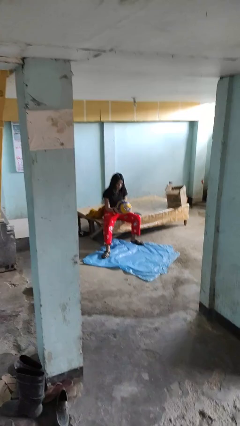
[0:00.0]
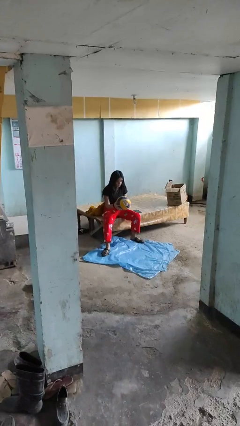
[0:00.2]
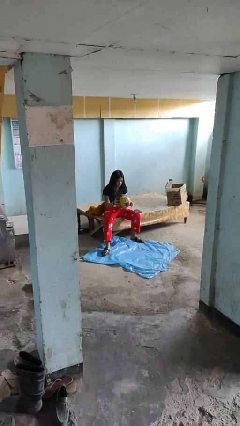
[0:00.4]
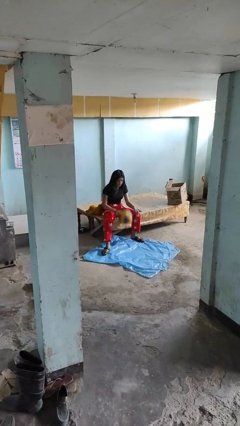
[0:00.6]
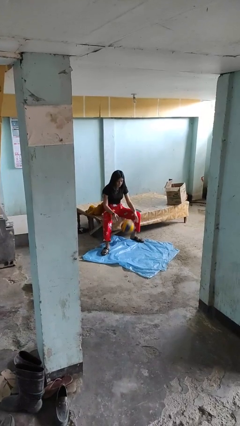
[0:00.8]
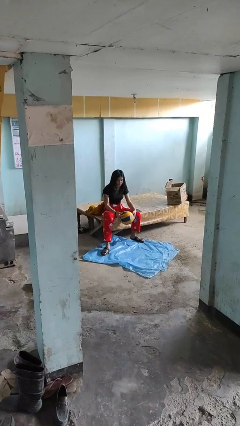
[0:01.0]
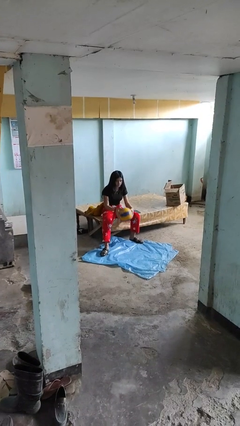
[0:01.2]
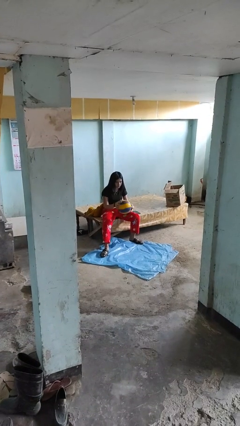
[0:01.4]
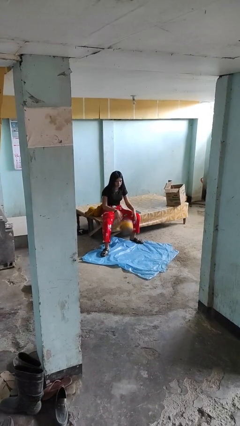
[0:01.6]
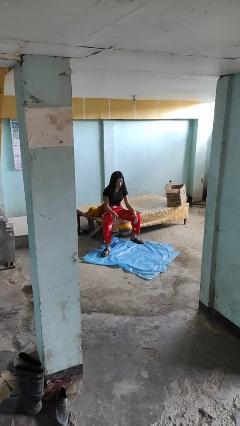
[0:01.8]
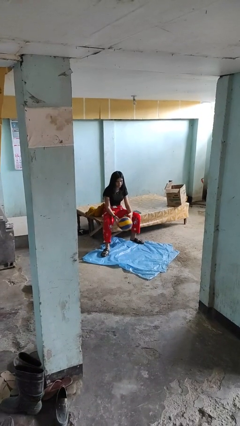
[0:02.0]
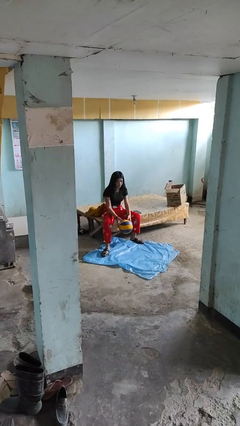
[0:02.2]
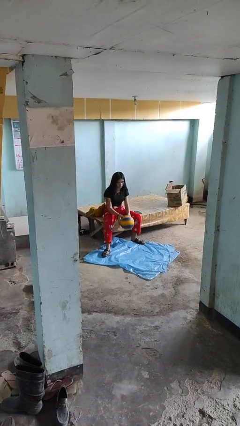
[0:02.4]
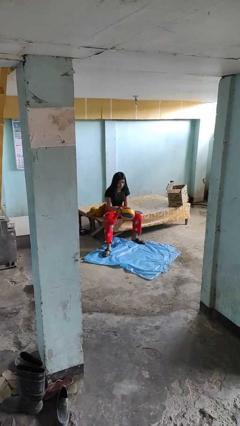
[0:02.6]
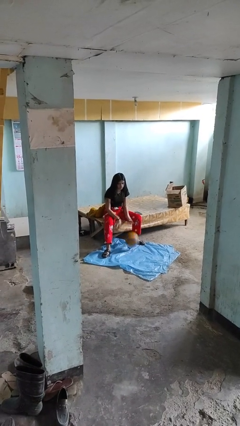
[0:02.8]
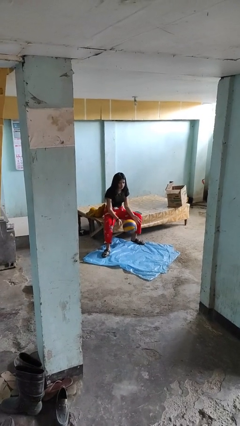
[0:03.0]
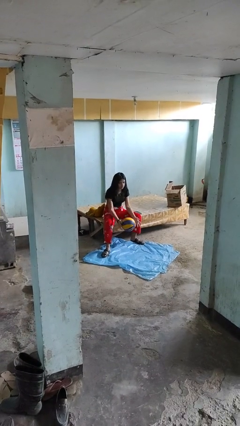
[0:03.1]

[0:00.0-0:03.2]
person bounces ball on floor

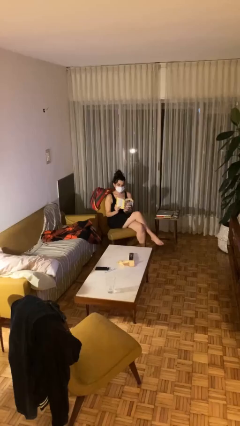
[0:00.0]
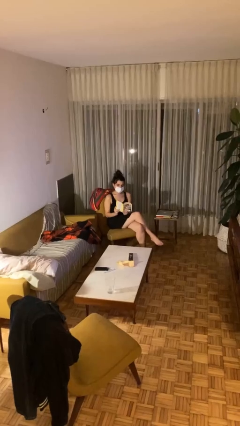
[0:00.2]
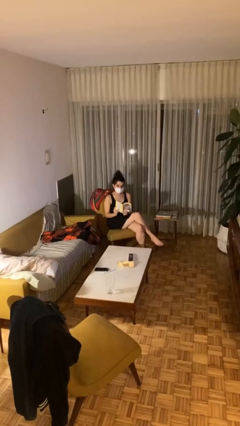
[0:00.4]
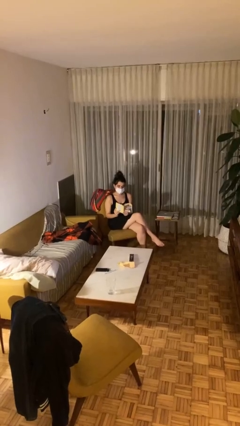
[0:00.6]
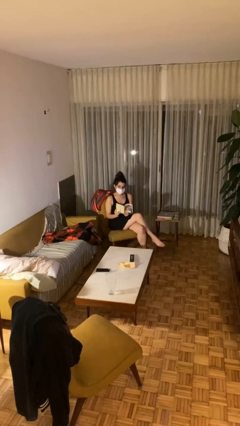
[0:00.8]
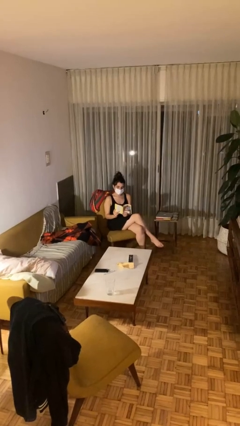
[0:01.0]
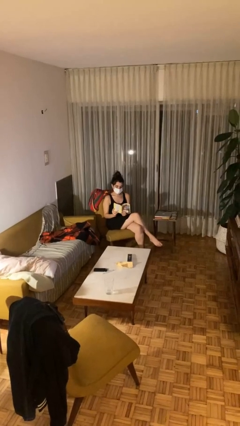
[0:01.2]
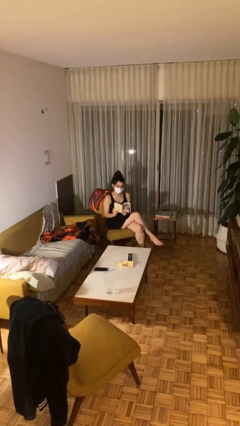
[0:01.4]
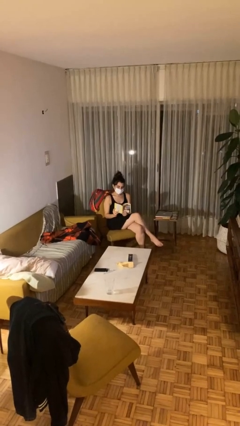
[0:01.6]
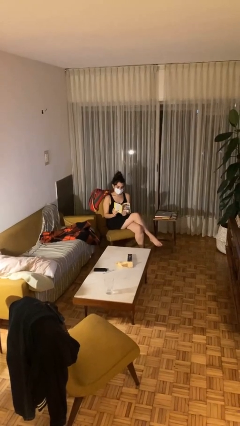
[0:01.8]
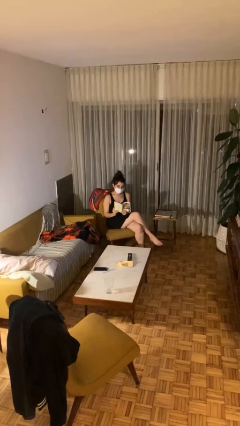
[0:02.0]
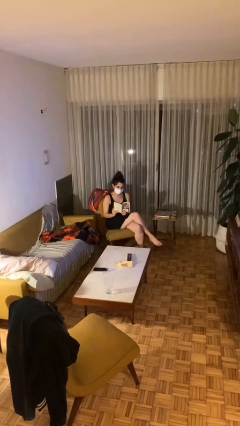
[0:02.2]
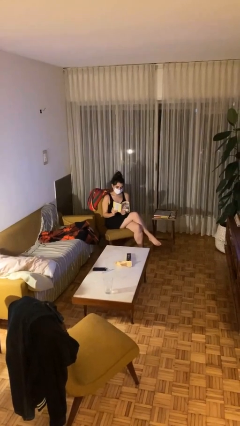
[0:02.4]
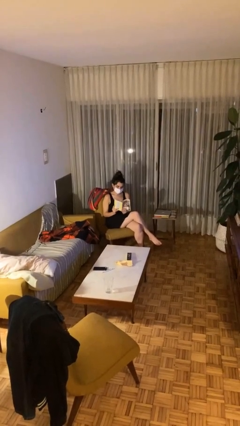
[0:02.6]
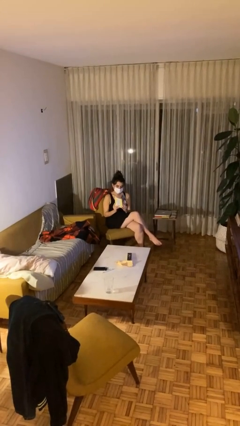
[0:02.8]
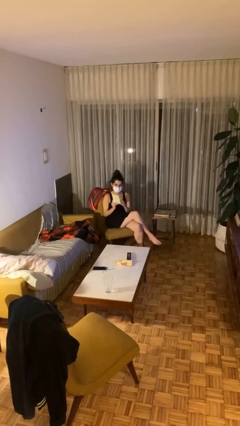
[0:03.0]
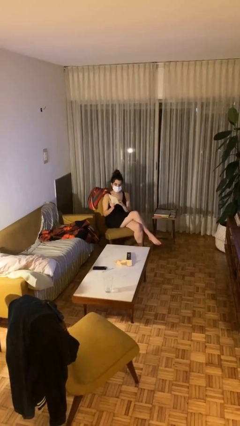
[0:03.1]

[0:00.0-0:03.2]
person reads document

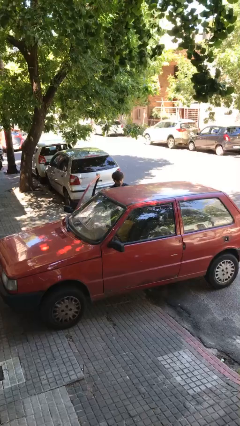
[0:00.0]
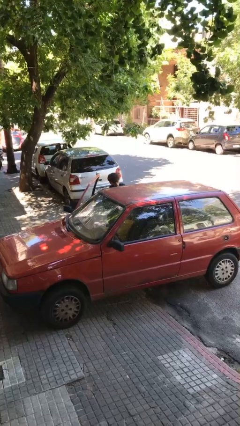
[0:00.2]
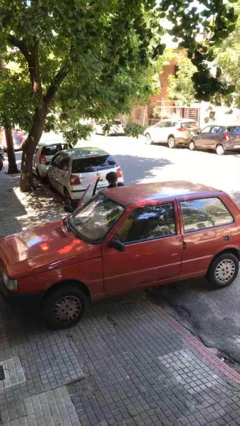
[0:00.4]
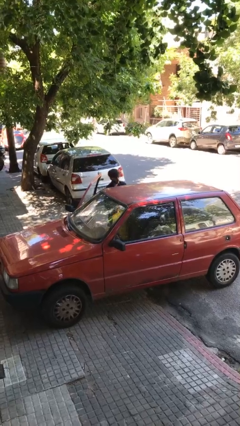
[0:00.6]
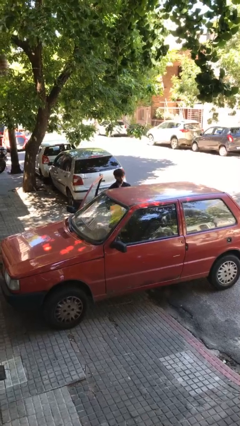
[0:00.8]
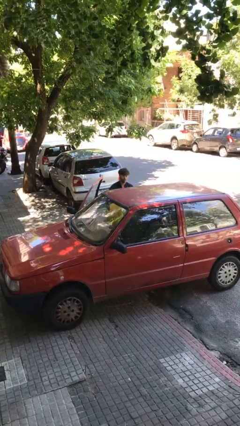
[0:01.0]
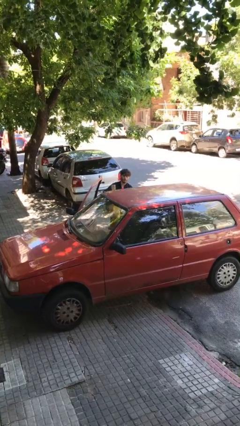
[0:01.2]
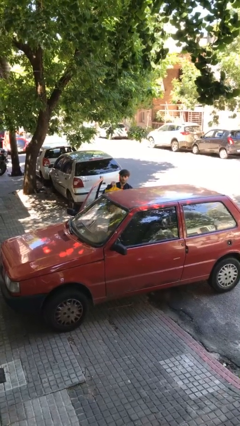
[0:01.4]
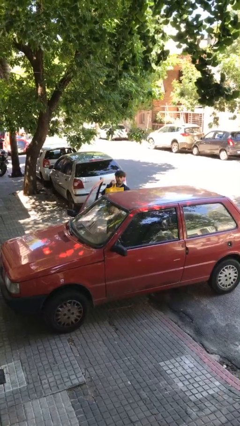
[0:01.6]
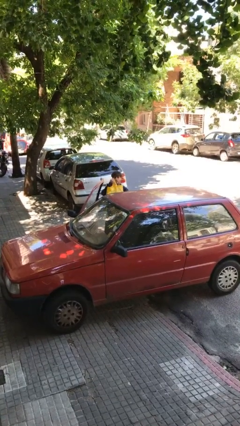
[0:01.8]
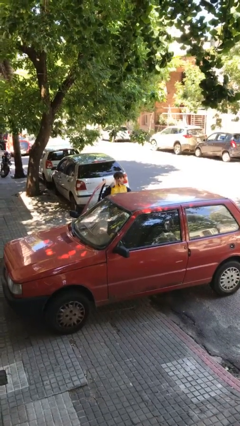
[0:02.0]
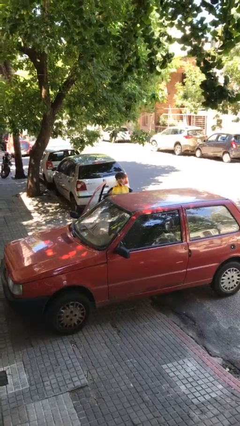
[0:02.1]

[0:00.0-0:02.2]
person unloads car

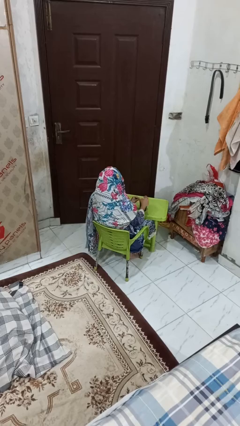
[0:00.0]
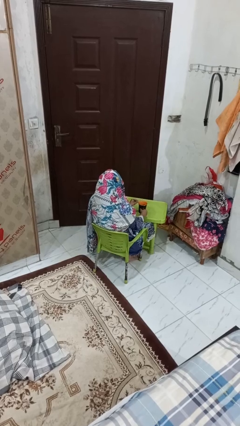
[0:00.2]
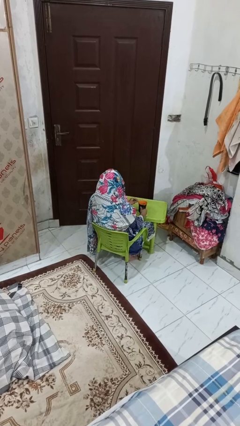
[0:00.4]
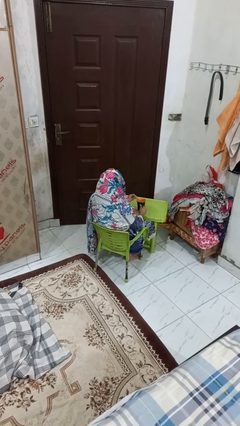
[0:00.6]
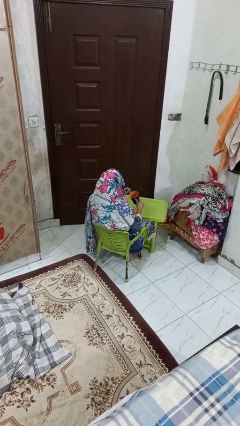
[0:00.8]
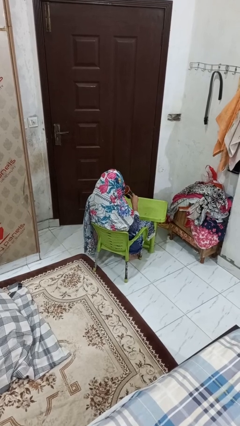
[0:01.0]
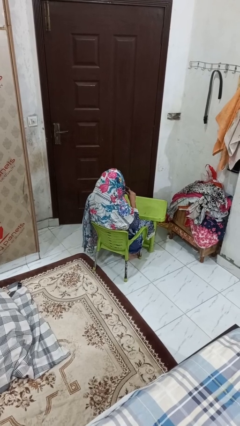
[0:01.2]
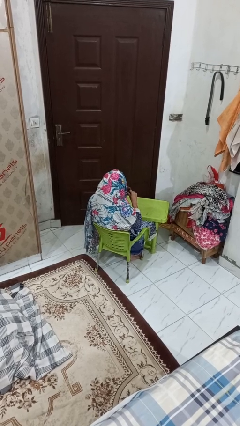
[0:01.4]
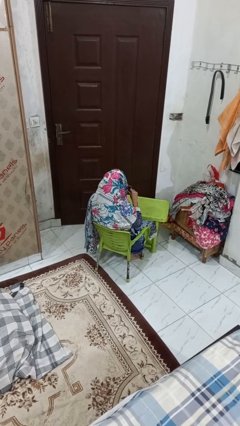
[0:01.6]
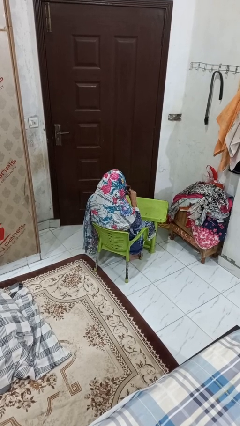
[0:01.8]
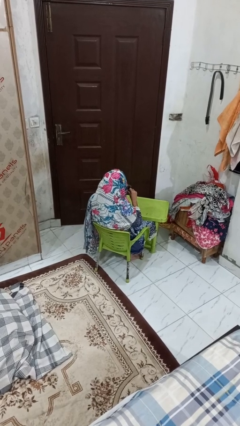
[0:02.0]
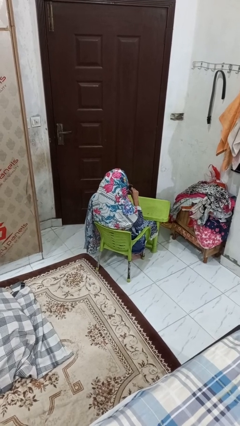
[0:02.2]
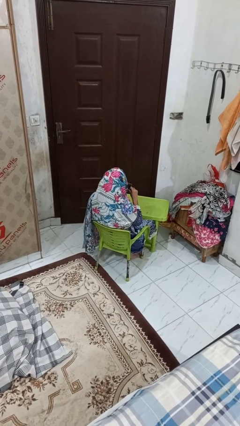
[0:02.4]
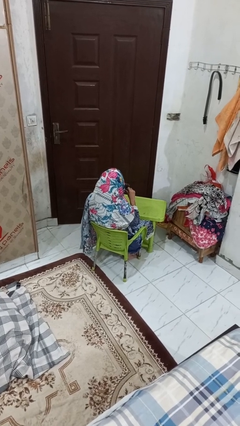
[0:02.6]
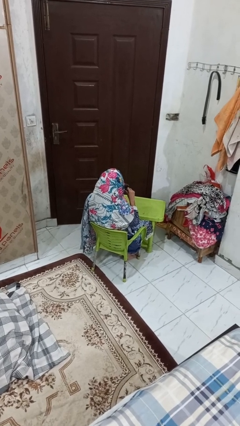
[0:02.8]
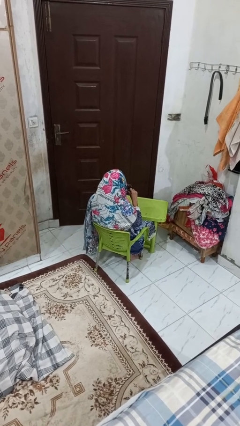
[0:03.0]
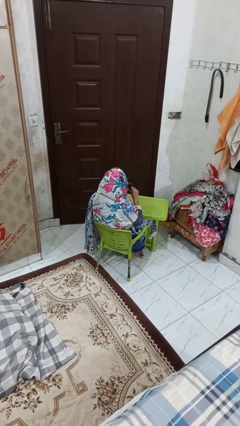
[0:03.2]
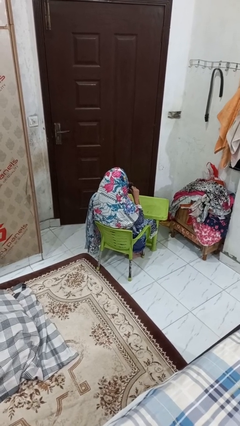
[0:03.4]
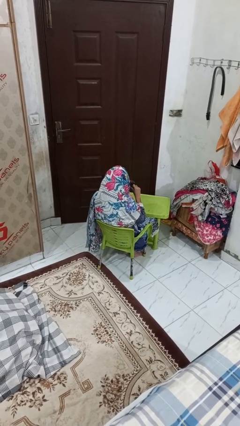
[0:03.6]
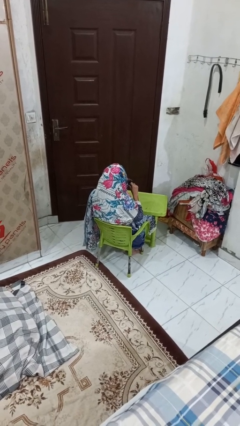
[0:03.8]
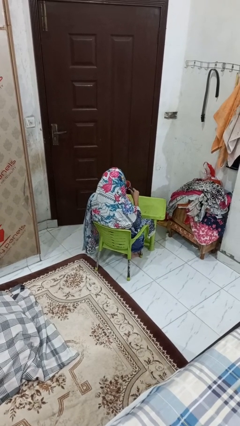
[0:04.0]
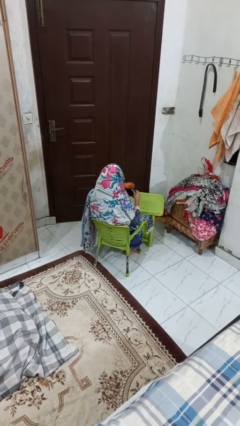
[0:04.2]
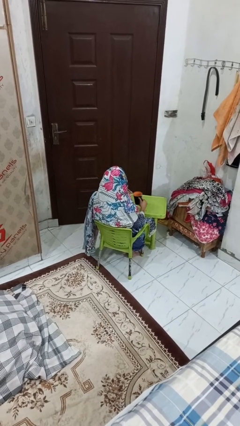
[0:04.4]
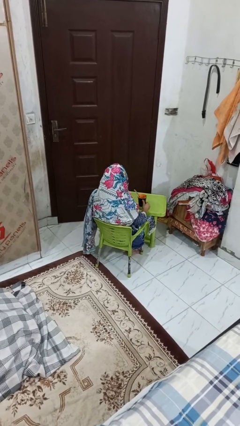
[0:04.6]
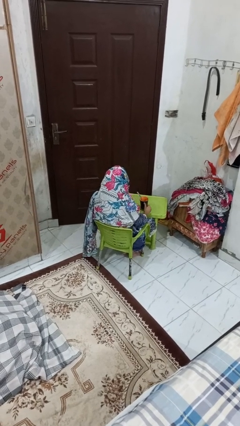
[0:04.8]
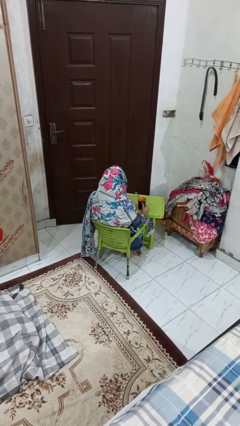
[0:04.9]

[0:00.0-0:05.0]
person drinks from mug

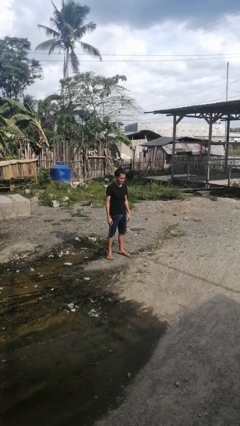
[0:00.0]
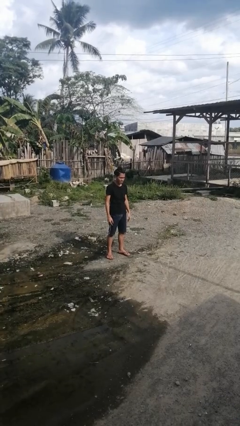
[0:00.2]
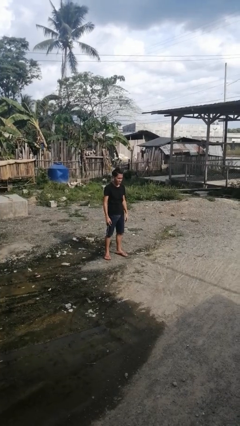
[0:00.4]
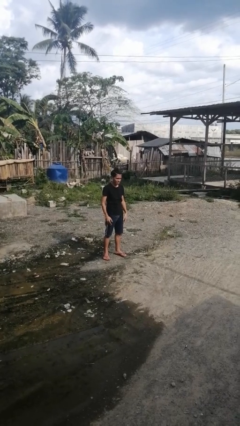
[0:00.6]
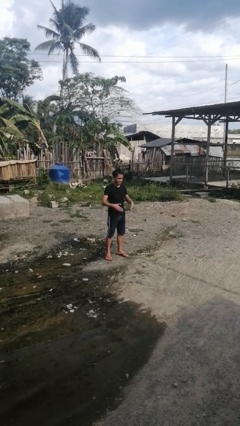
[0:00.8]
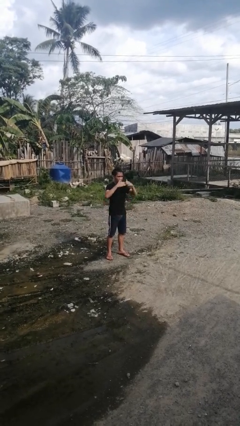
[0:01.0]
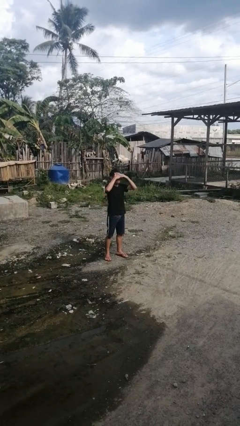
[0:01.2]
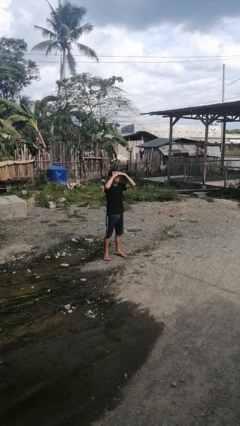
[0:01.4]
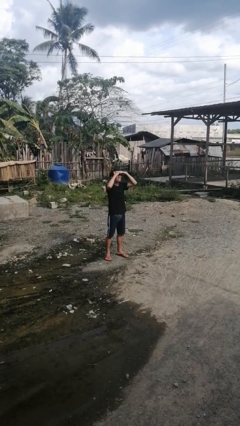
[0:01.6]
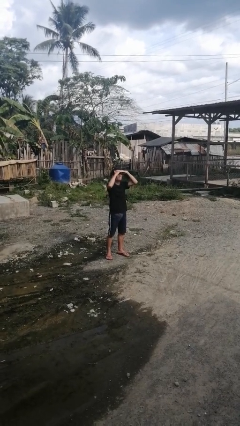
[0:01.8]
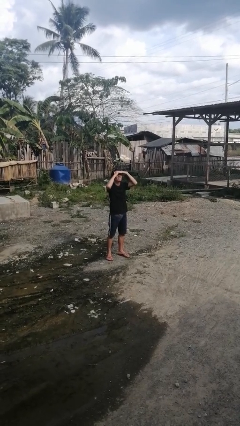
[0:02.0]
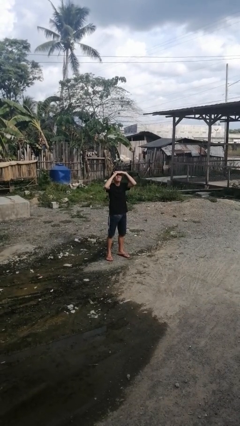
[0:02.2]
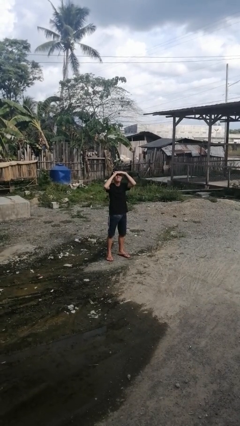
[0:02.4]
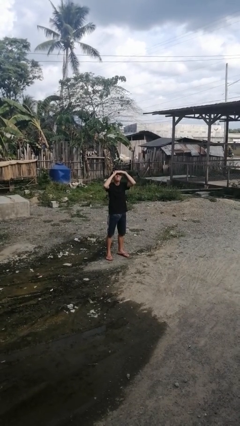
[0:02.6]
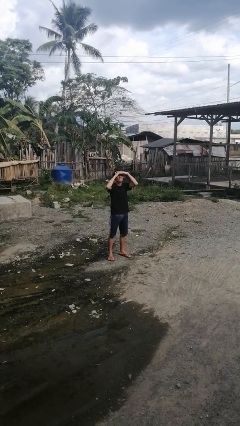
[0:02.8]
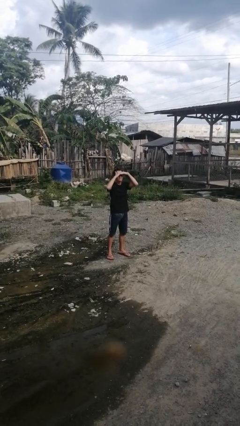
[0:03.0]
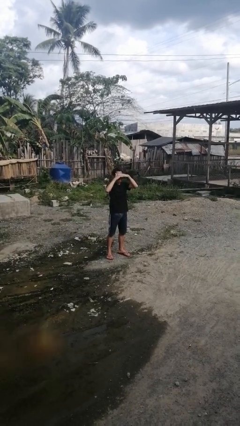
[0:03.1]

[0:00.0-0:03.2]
person shades eyes

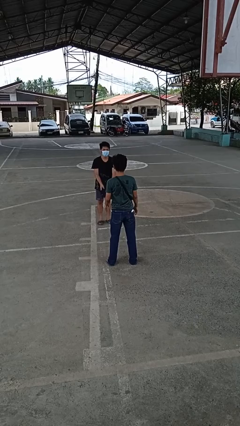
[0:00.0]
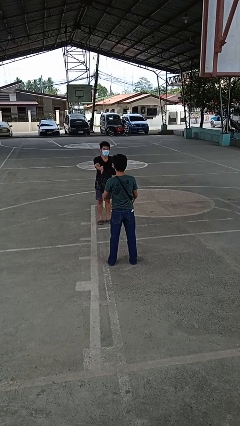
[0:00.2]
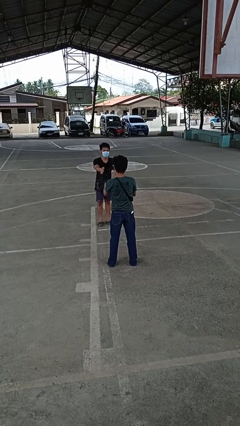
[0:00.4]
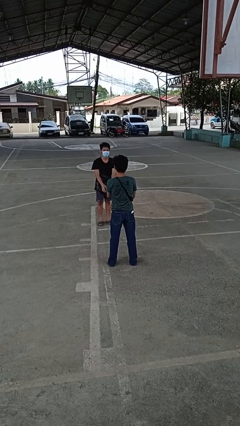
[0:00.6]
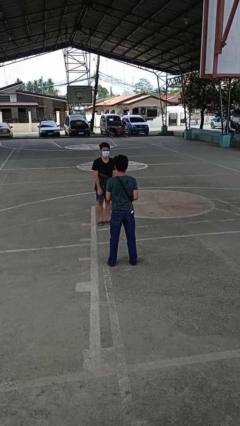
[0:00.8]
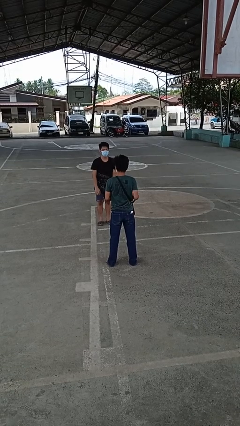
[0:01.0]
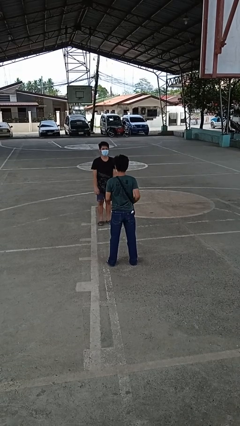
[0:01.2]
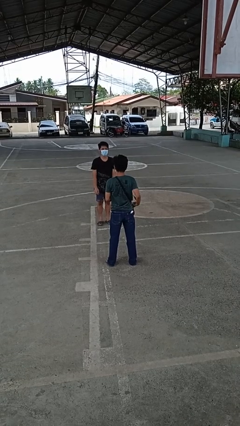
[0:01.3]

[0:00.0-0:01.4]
person catches object from person
